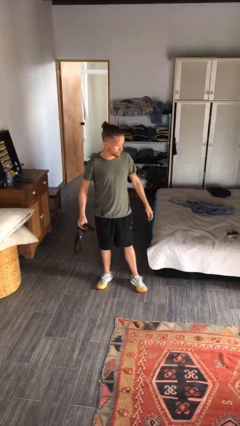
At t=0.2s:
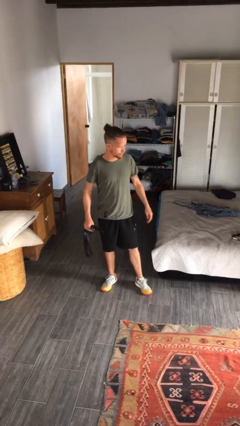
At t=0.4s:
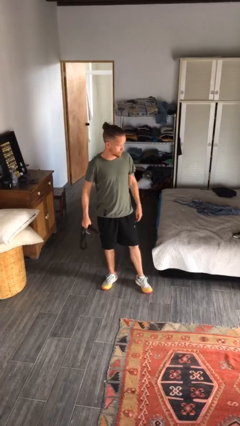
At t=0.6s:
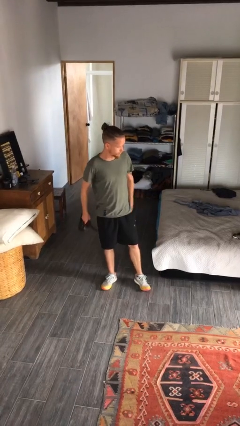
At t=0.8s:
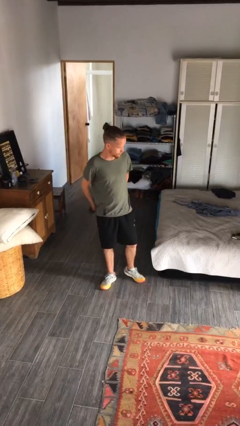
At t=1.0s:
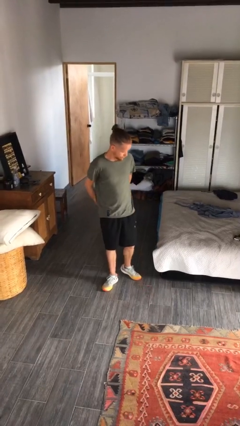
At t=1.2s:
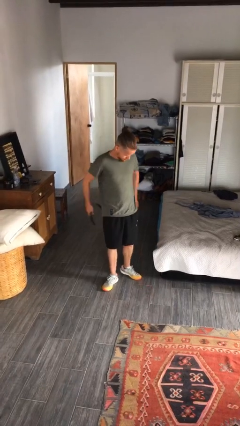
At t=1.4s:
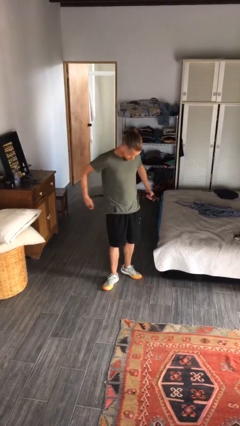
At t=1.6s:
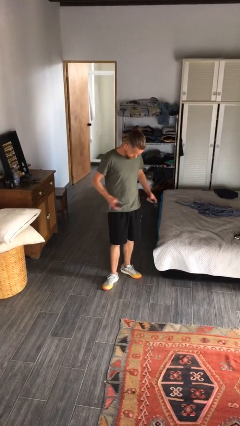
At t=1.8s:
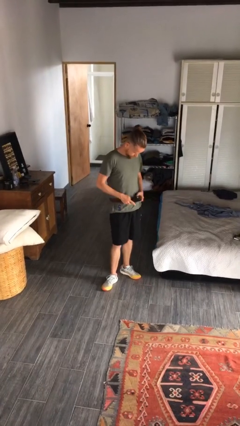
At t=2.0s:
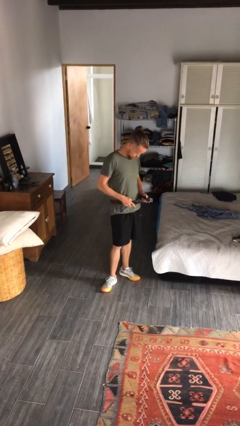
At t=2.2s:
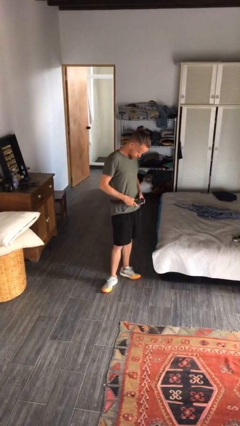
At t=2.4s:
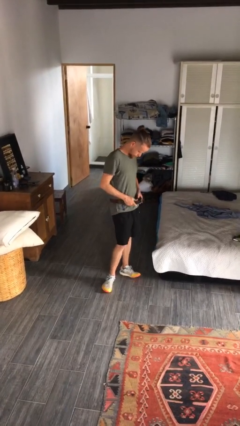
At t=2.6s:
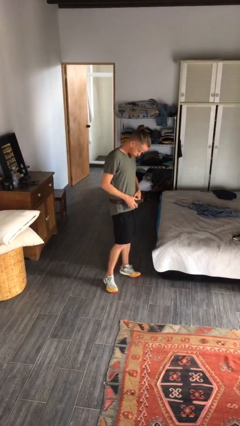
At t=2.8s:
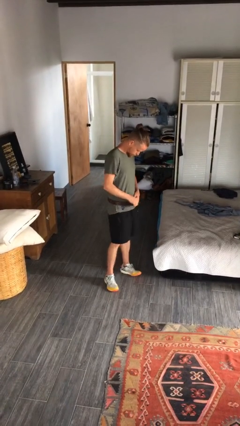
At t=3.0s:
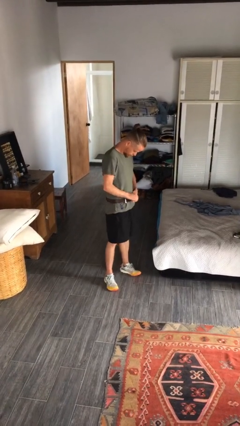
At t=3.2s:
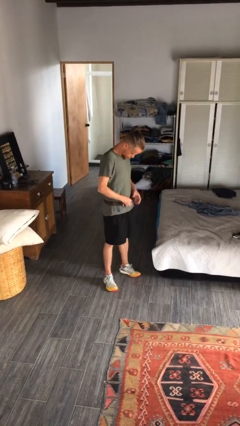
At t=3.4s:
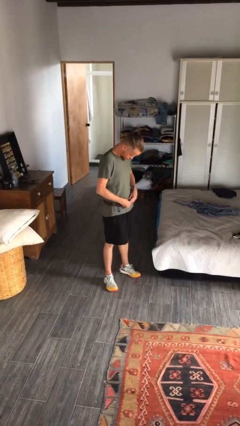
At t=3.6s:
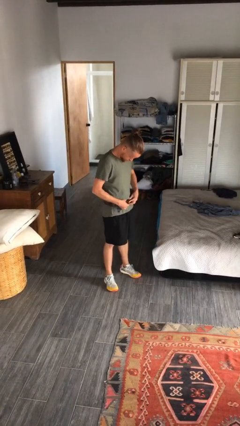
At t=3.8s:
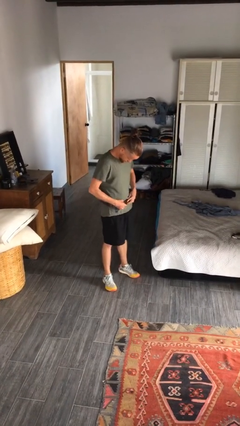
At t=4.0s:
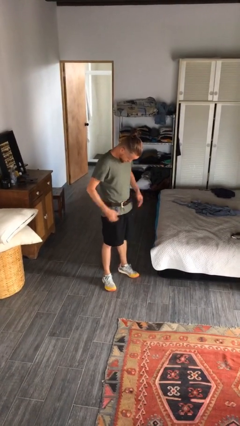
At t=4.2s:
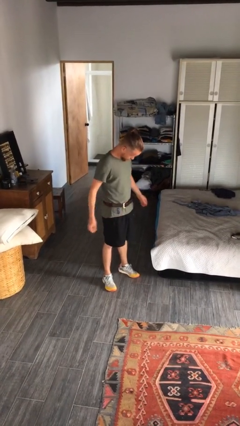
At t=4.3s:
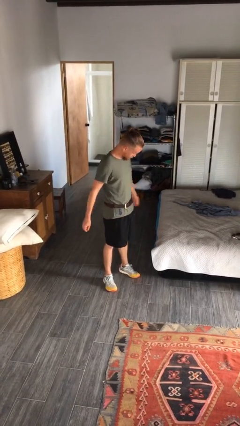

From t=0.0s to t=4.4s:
person puts on belt

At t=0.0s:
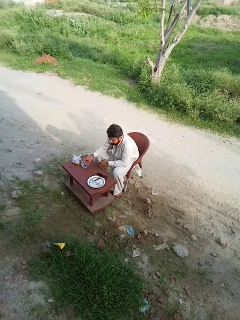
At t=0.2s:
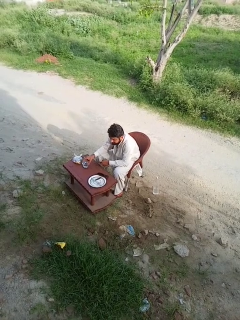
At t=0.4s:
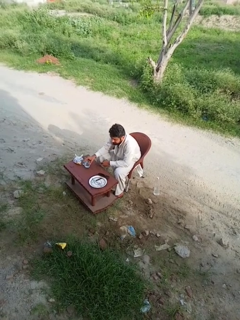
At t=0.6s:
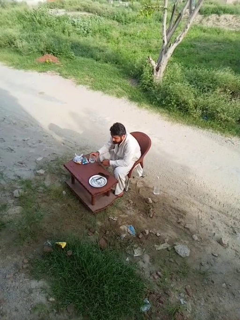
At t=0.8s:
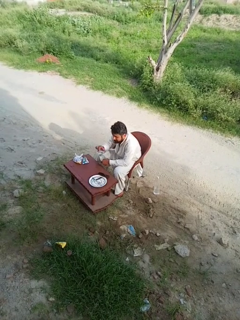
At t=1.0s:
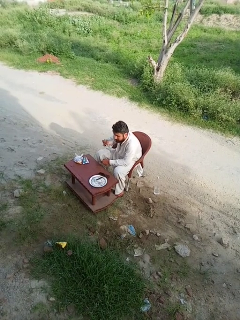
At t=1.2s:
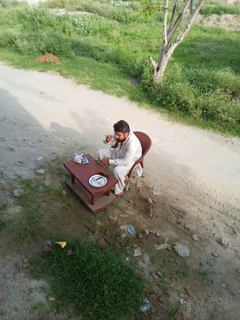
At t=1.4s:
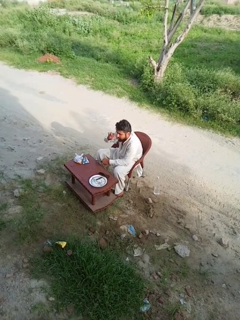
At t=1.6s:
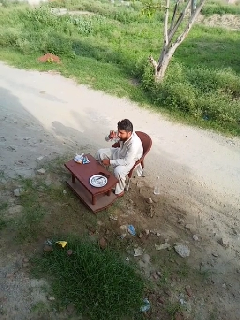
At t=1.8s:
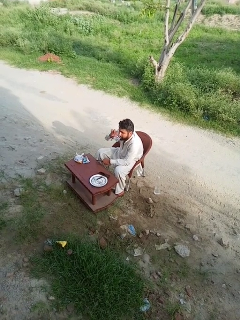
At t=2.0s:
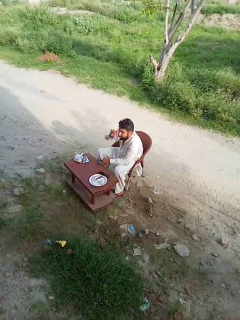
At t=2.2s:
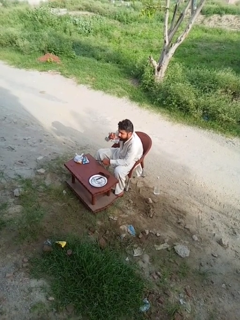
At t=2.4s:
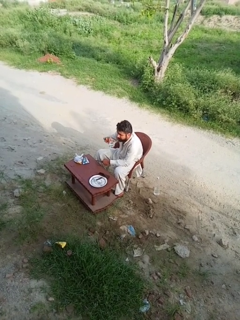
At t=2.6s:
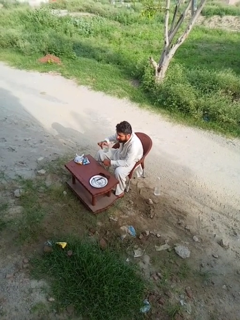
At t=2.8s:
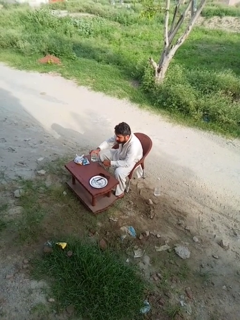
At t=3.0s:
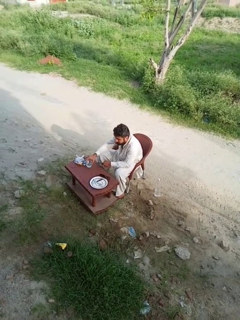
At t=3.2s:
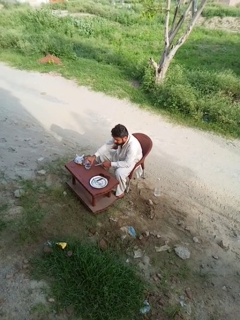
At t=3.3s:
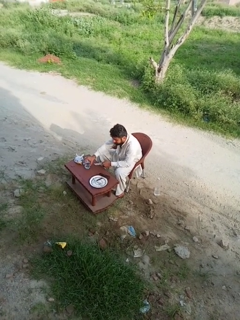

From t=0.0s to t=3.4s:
person drinks from cup

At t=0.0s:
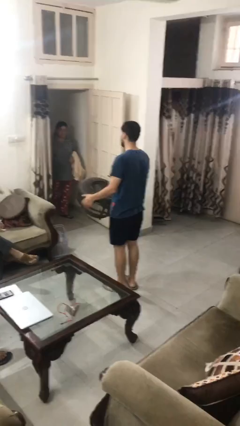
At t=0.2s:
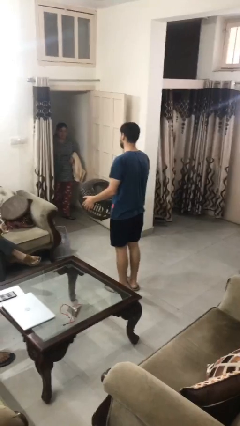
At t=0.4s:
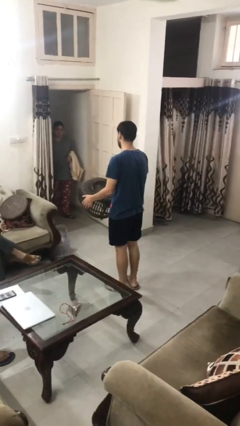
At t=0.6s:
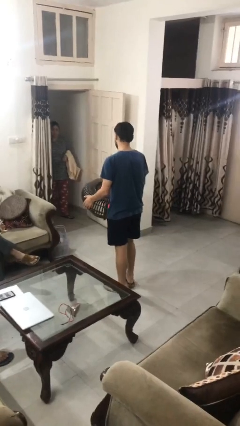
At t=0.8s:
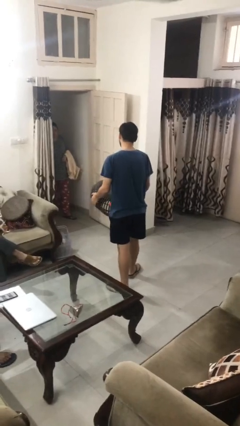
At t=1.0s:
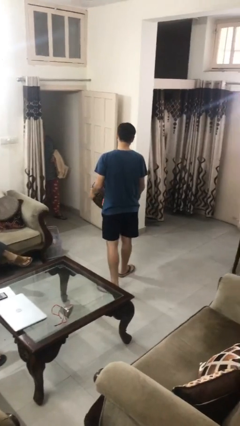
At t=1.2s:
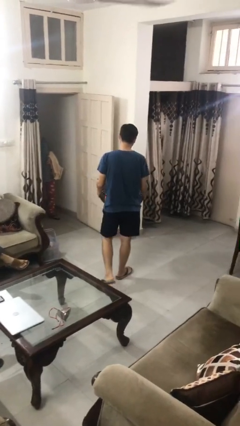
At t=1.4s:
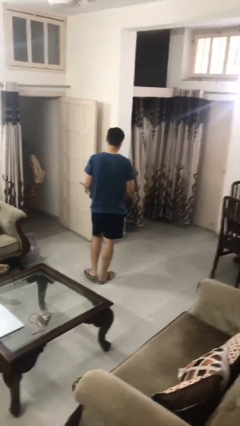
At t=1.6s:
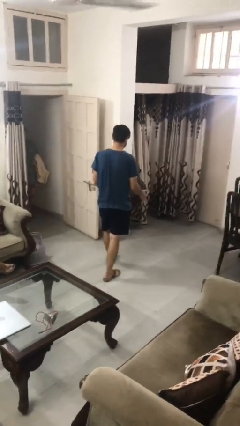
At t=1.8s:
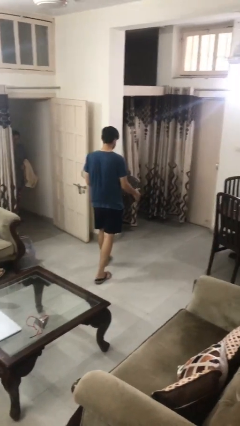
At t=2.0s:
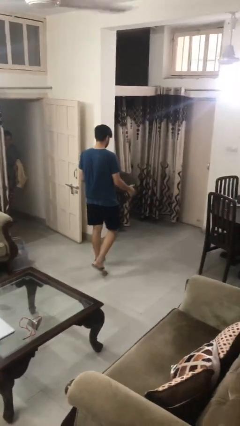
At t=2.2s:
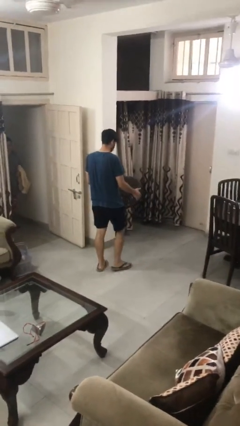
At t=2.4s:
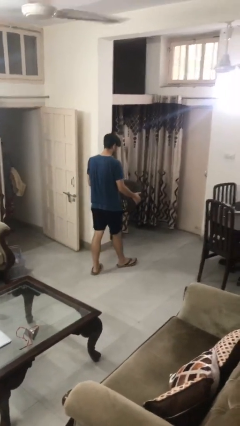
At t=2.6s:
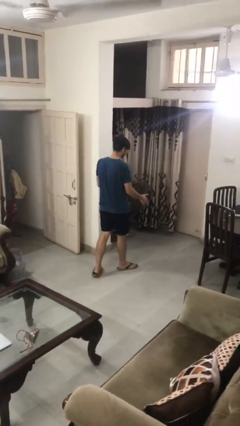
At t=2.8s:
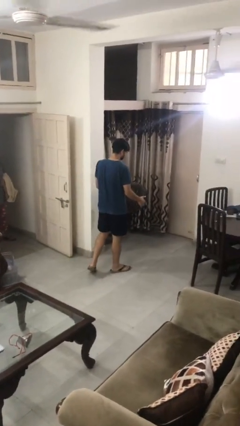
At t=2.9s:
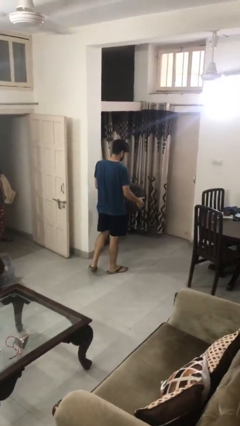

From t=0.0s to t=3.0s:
person carries furniture

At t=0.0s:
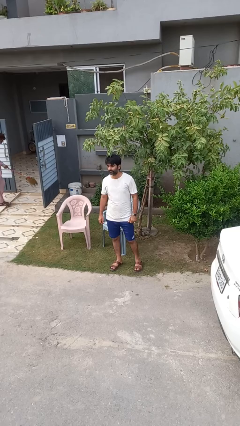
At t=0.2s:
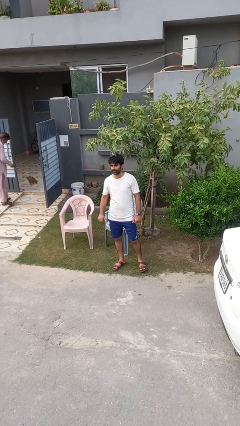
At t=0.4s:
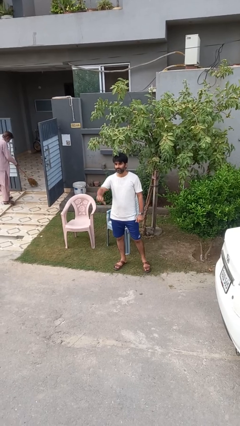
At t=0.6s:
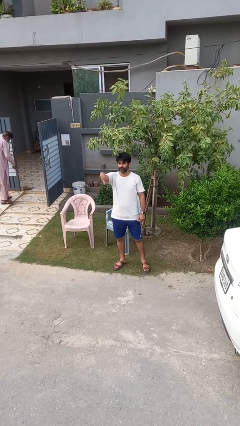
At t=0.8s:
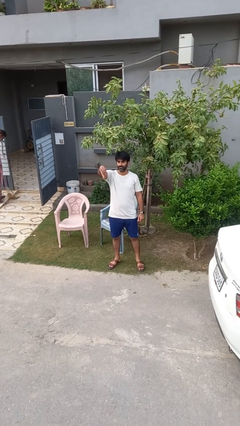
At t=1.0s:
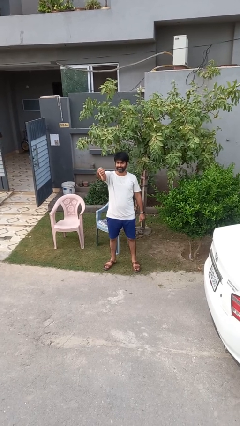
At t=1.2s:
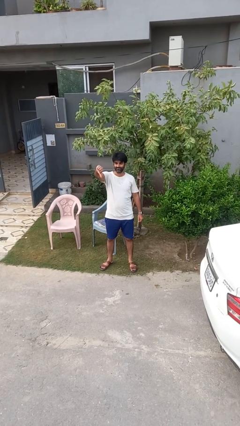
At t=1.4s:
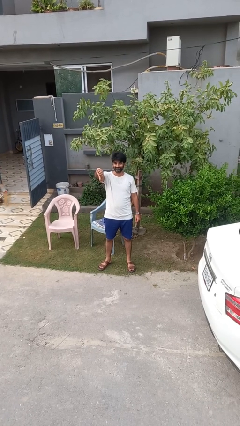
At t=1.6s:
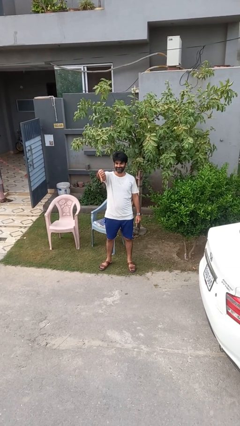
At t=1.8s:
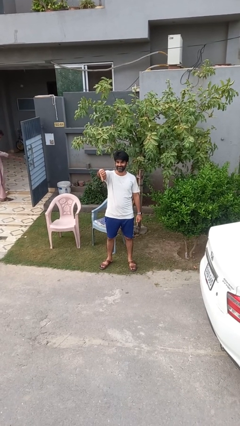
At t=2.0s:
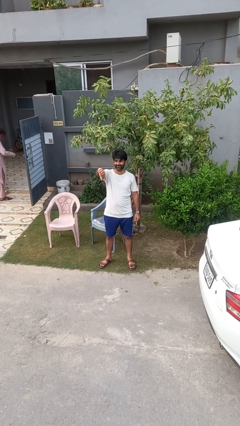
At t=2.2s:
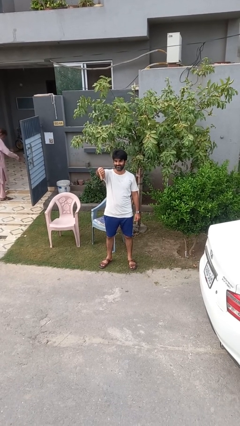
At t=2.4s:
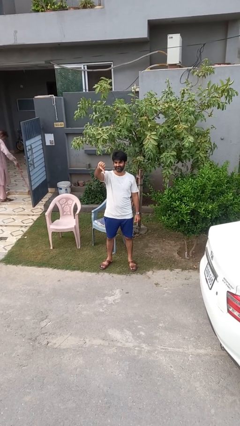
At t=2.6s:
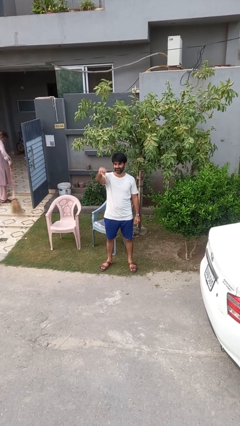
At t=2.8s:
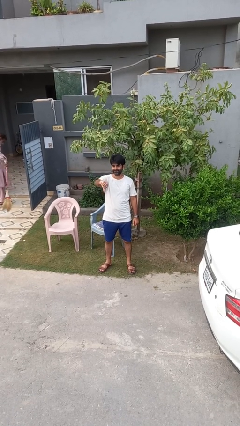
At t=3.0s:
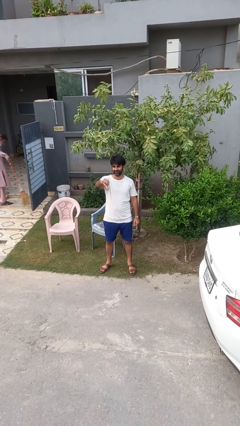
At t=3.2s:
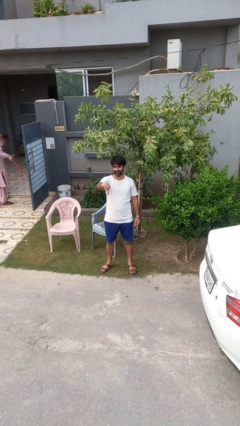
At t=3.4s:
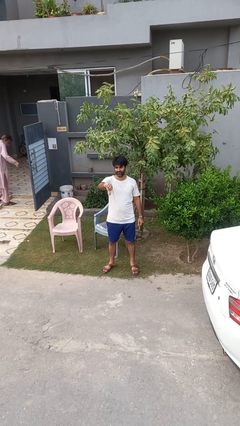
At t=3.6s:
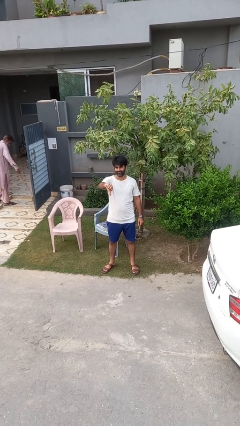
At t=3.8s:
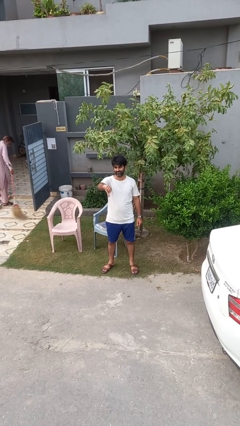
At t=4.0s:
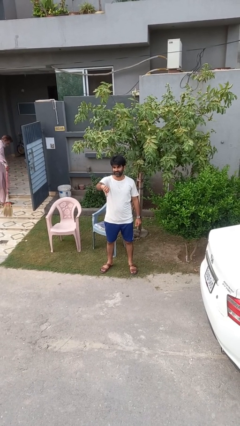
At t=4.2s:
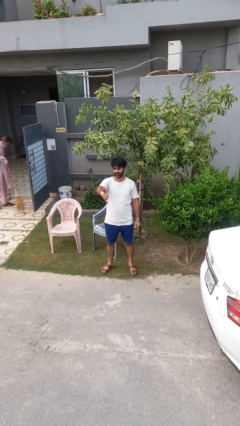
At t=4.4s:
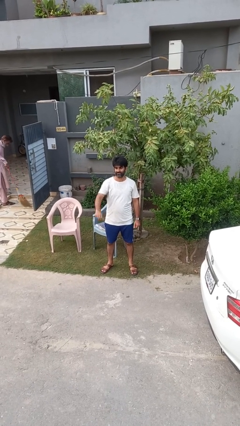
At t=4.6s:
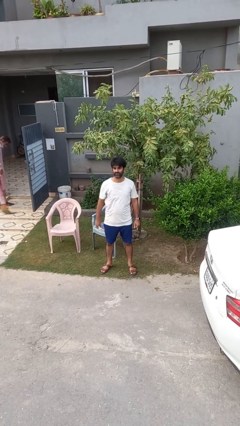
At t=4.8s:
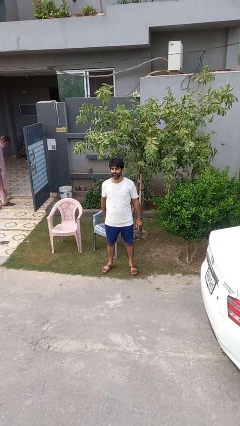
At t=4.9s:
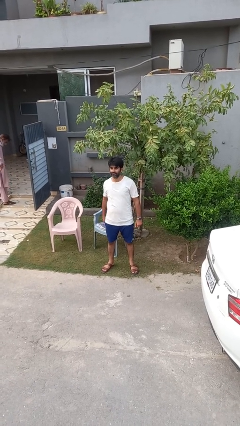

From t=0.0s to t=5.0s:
person gestures thumbs down

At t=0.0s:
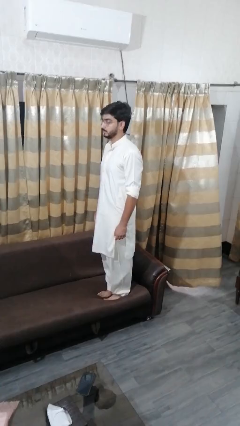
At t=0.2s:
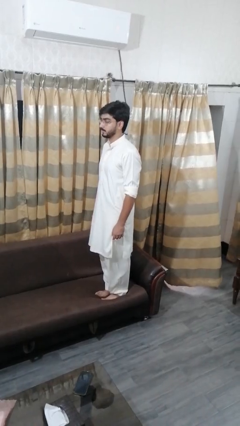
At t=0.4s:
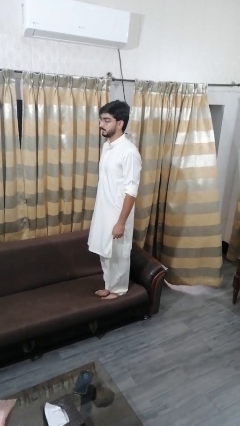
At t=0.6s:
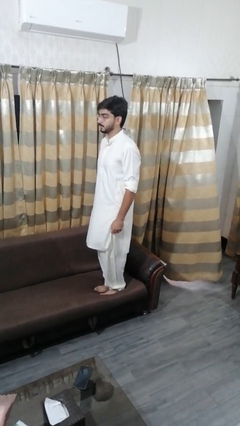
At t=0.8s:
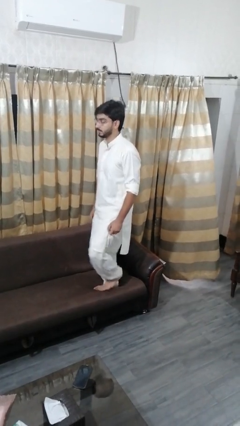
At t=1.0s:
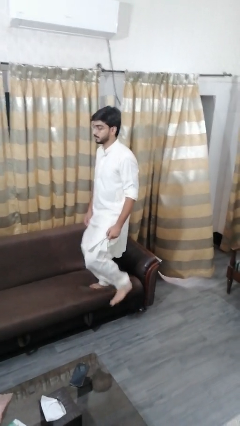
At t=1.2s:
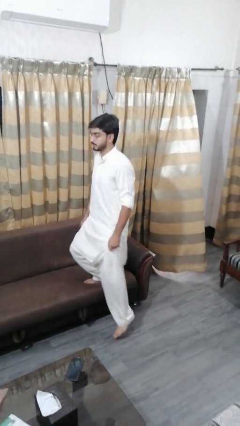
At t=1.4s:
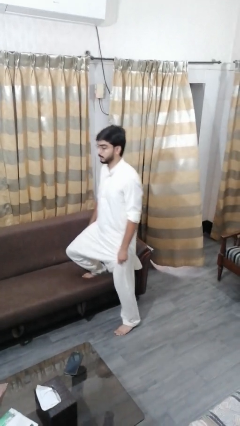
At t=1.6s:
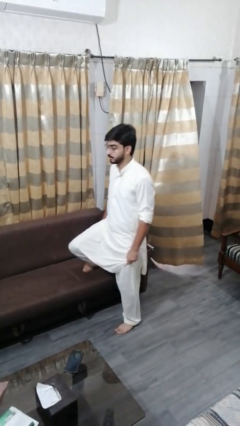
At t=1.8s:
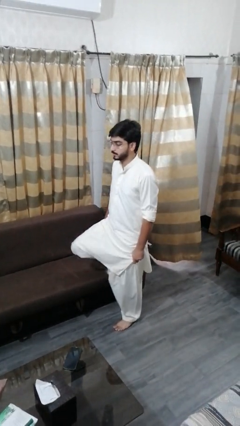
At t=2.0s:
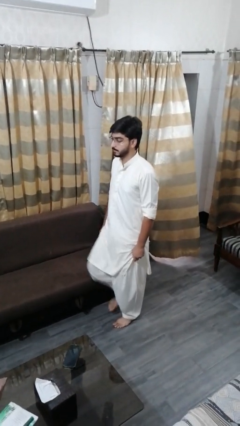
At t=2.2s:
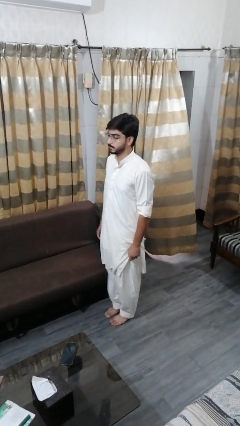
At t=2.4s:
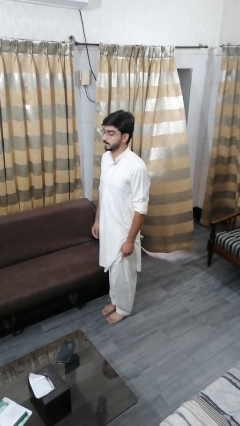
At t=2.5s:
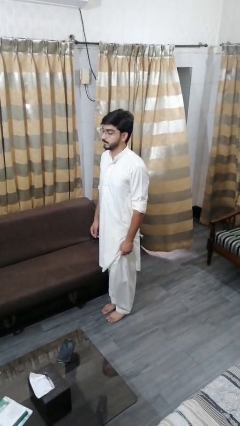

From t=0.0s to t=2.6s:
person climbs off couch
